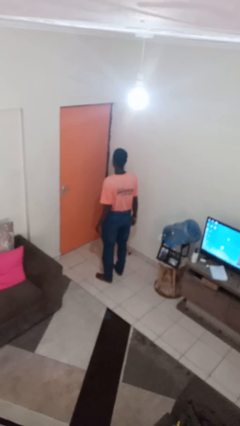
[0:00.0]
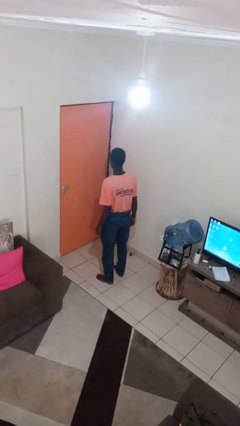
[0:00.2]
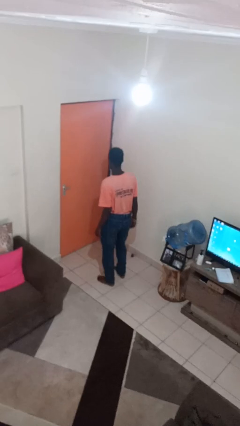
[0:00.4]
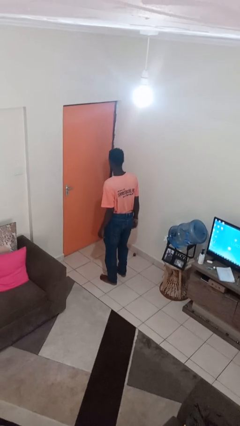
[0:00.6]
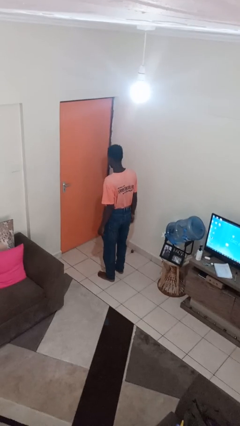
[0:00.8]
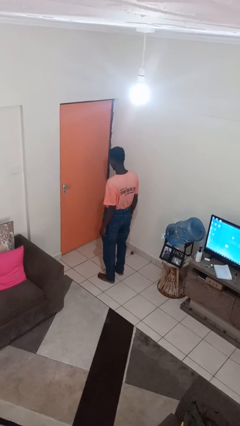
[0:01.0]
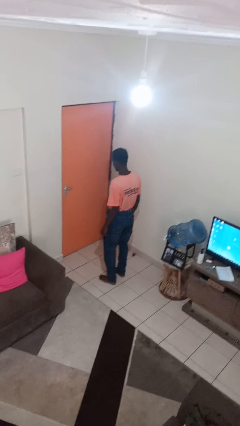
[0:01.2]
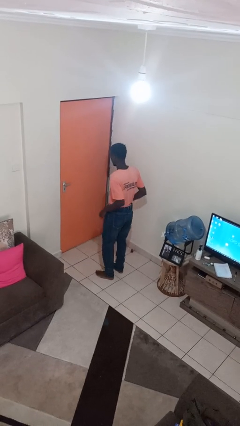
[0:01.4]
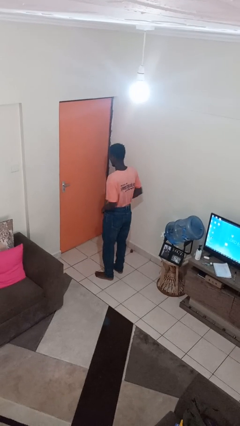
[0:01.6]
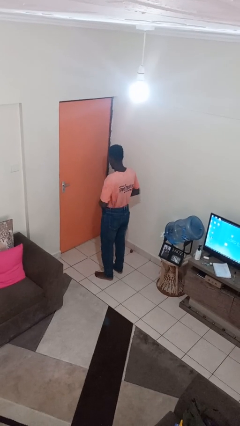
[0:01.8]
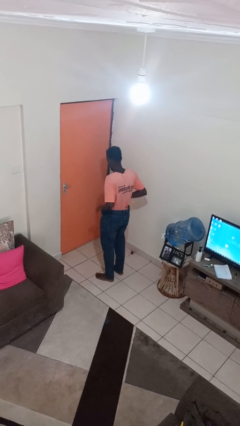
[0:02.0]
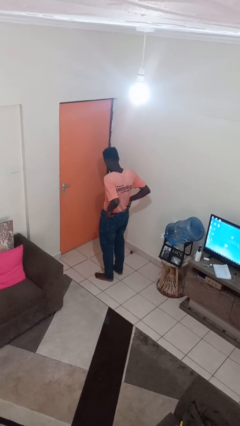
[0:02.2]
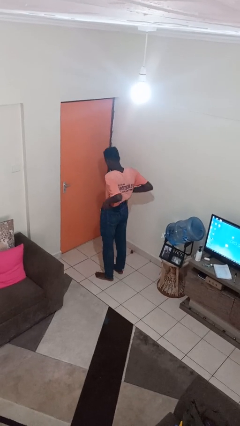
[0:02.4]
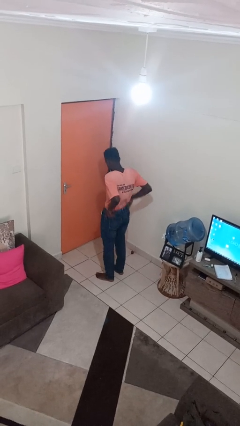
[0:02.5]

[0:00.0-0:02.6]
person hikes up pants

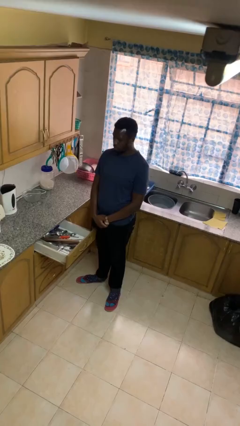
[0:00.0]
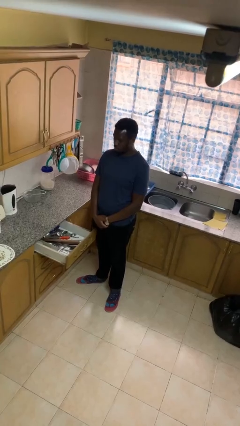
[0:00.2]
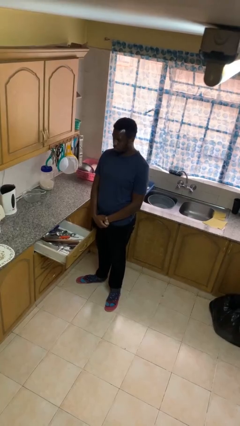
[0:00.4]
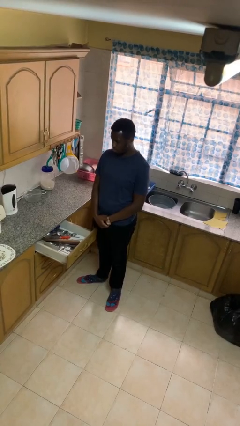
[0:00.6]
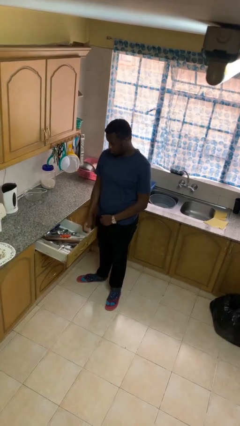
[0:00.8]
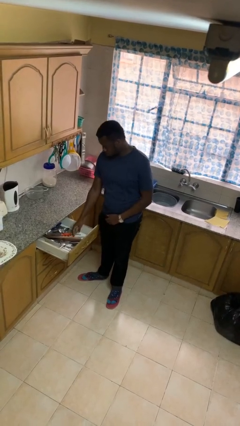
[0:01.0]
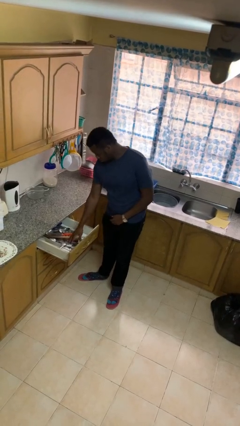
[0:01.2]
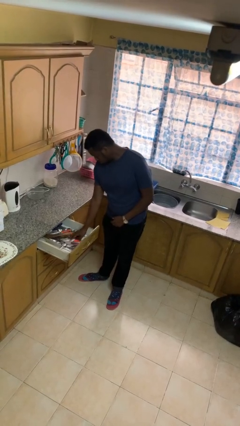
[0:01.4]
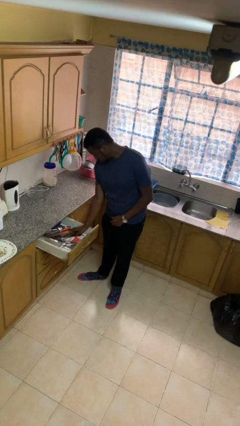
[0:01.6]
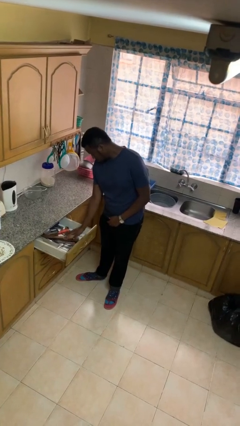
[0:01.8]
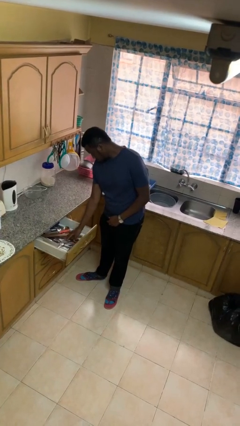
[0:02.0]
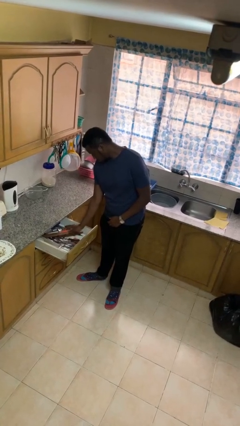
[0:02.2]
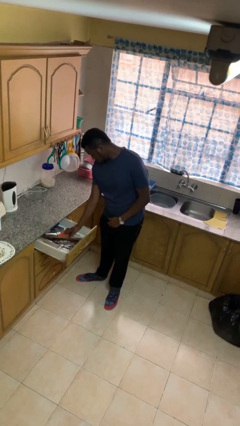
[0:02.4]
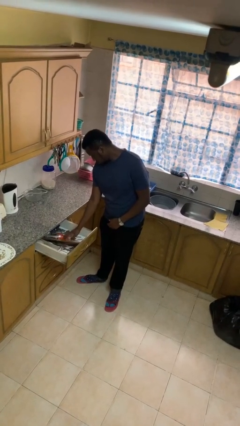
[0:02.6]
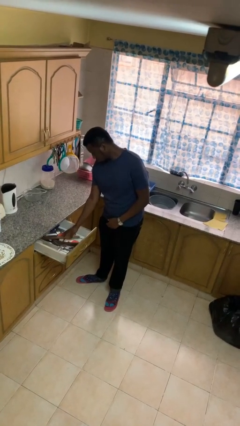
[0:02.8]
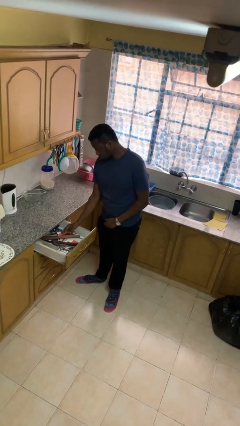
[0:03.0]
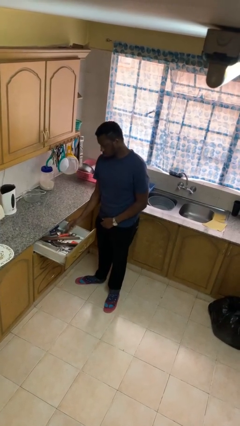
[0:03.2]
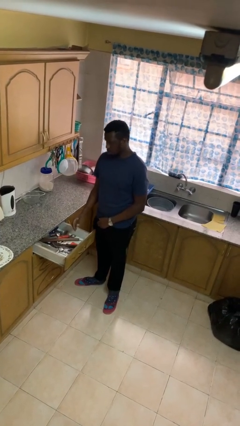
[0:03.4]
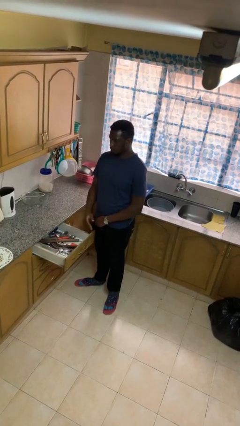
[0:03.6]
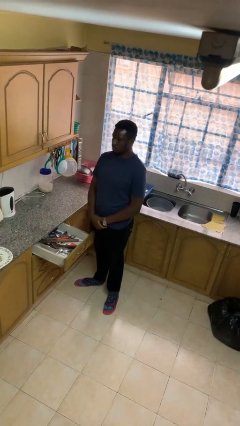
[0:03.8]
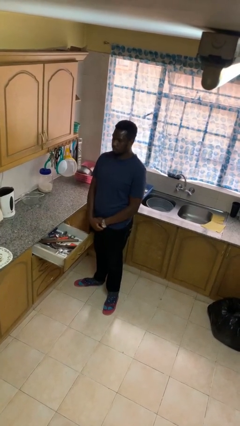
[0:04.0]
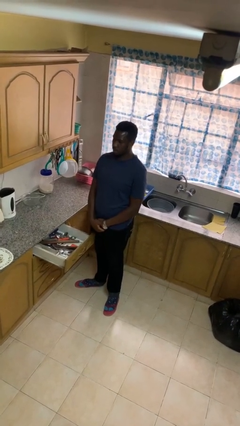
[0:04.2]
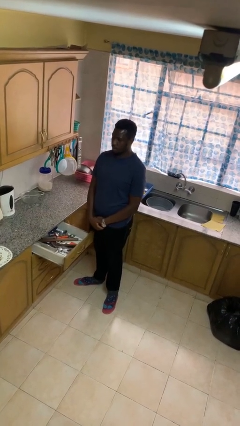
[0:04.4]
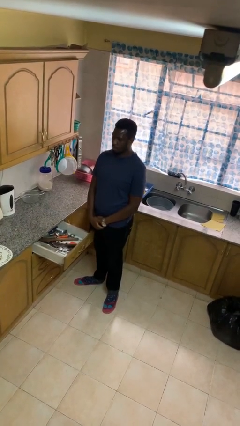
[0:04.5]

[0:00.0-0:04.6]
person searches in kitchen drawer

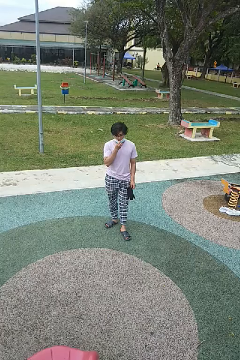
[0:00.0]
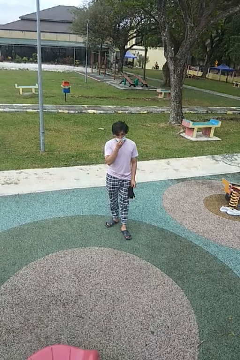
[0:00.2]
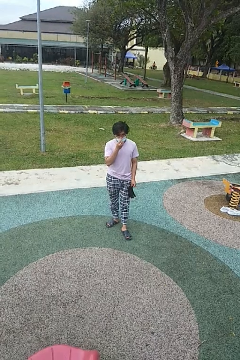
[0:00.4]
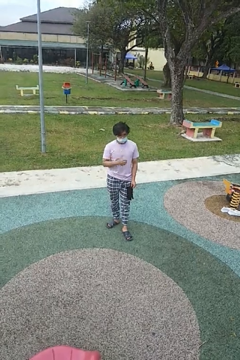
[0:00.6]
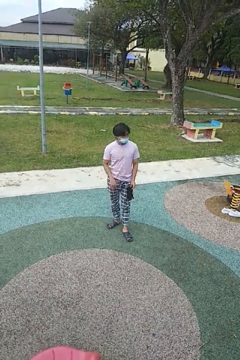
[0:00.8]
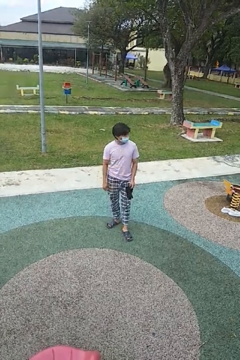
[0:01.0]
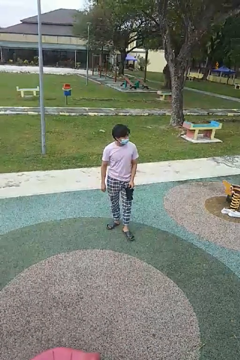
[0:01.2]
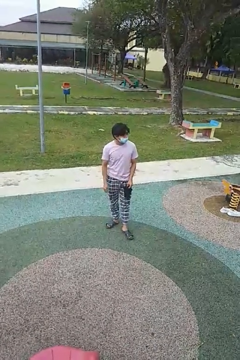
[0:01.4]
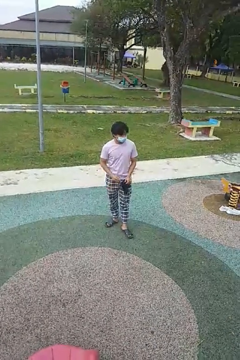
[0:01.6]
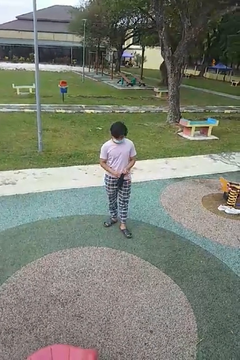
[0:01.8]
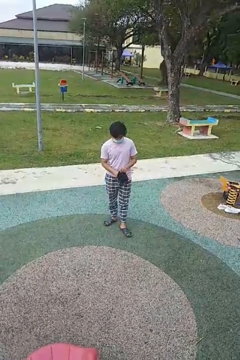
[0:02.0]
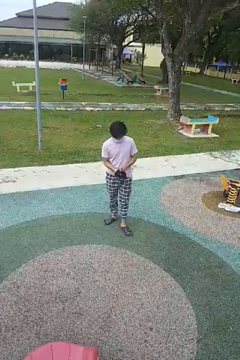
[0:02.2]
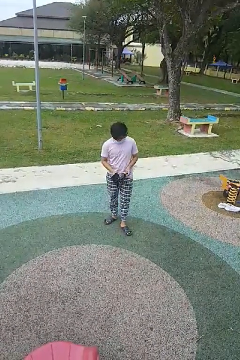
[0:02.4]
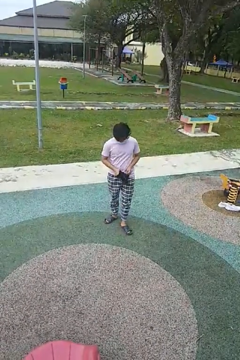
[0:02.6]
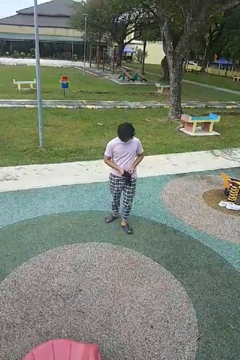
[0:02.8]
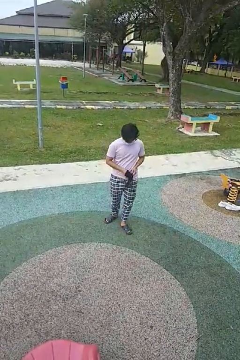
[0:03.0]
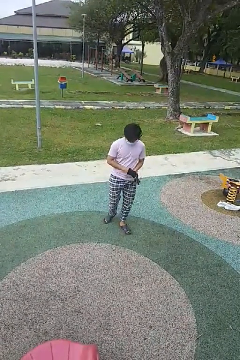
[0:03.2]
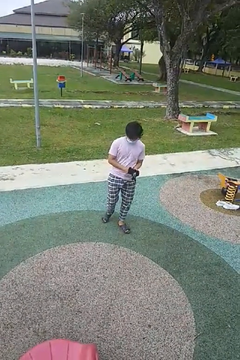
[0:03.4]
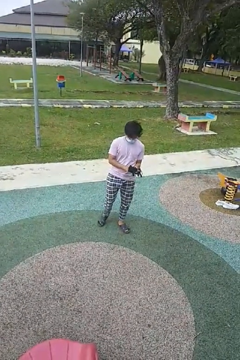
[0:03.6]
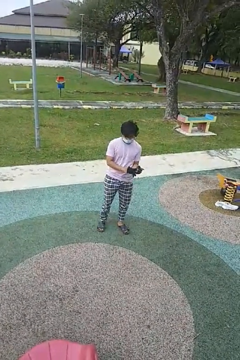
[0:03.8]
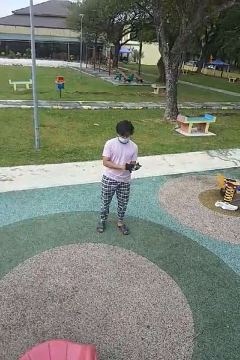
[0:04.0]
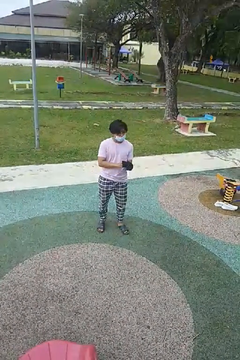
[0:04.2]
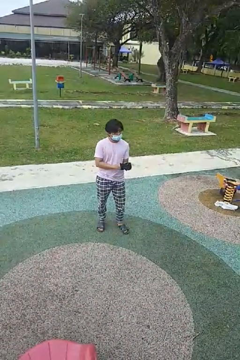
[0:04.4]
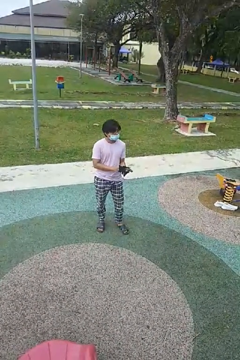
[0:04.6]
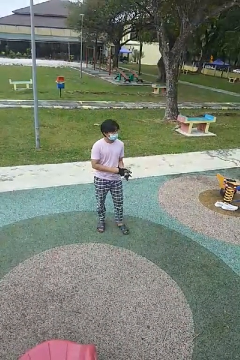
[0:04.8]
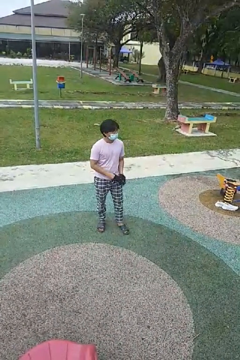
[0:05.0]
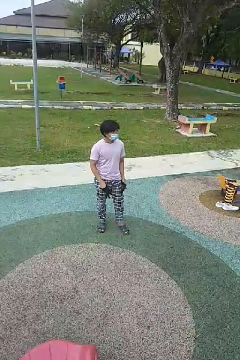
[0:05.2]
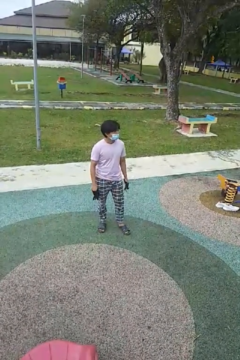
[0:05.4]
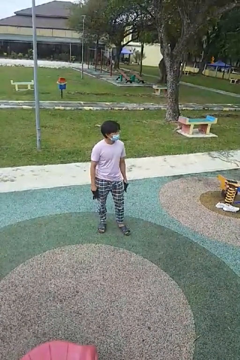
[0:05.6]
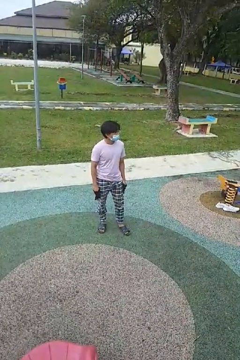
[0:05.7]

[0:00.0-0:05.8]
person puts on gloves

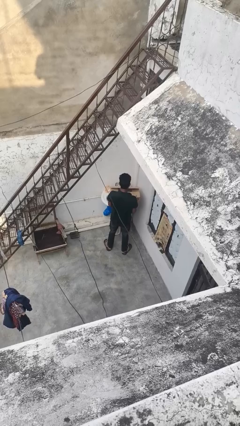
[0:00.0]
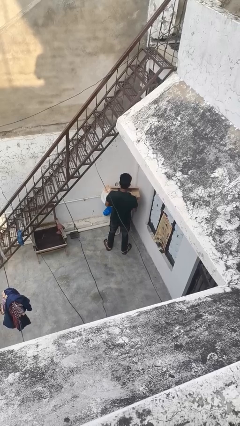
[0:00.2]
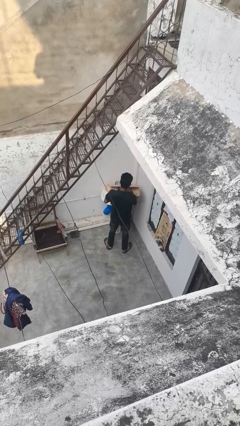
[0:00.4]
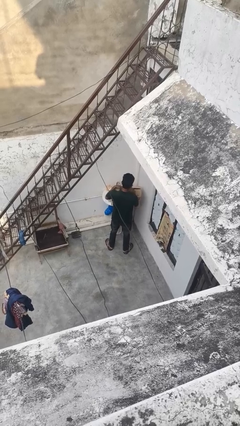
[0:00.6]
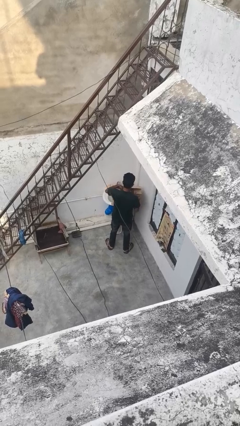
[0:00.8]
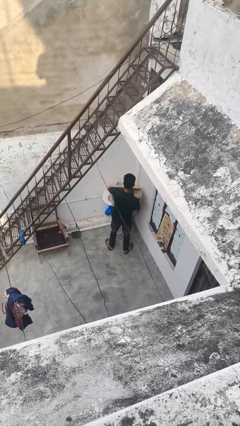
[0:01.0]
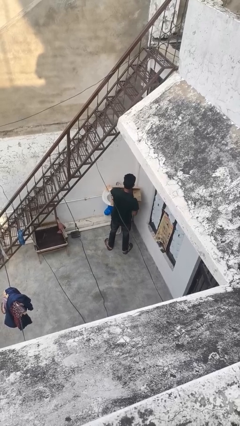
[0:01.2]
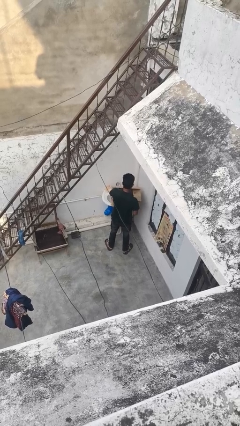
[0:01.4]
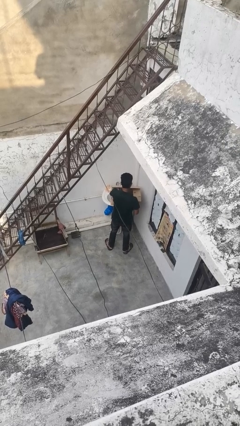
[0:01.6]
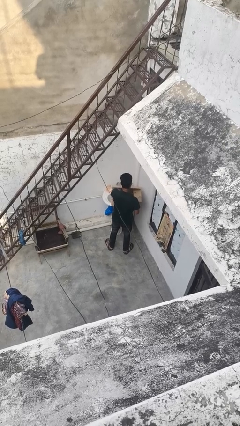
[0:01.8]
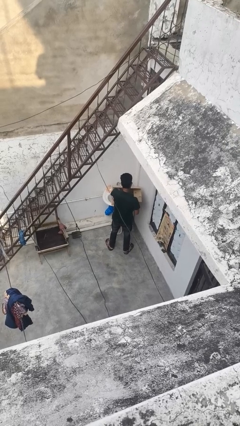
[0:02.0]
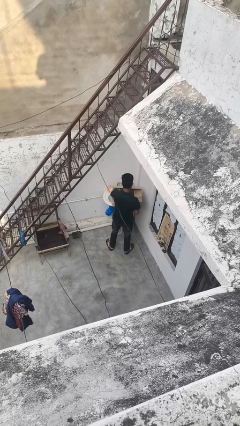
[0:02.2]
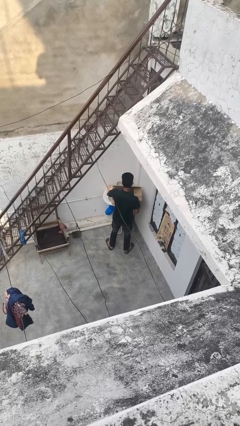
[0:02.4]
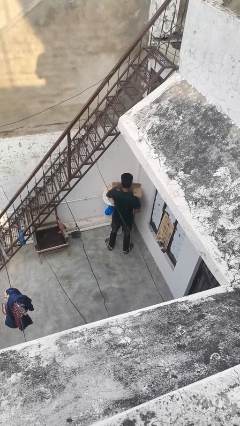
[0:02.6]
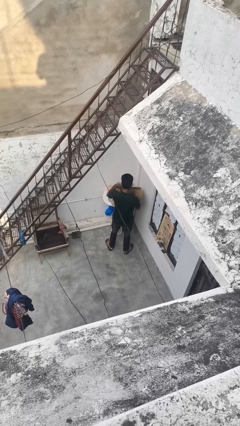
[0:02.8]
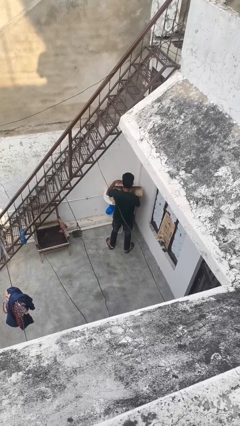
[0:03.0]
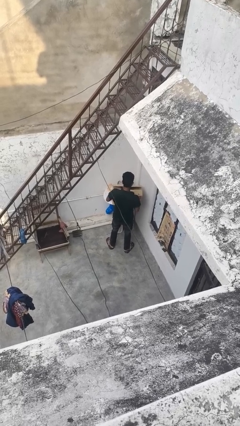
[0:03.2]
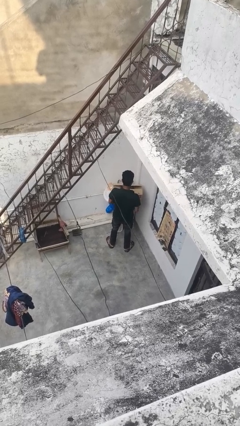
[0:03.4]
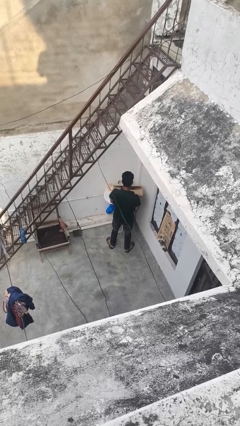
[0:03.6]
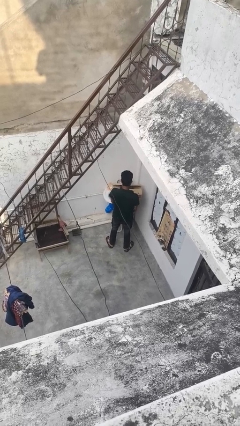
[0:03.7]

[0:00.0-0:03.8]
person searches in box

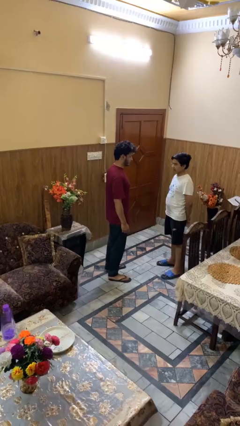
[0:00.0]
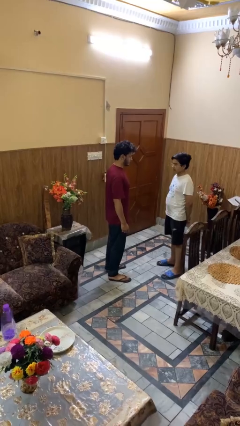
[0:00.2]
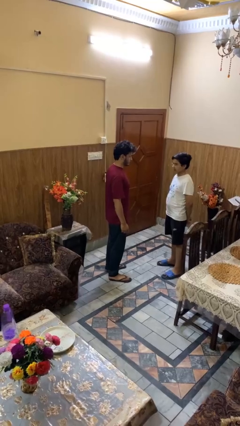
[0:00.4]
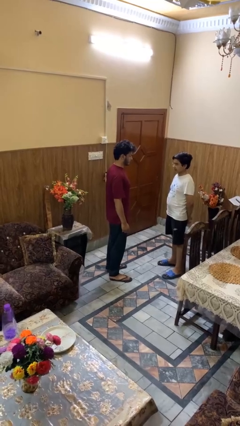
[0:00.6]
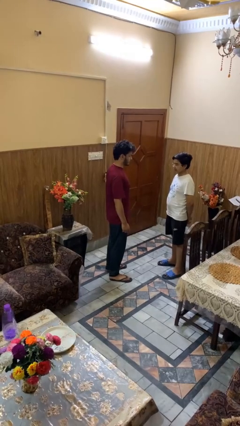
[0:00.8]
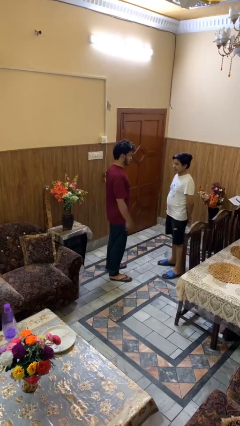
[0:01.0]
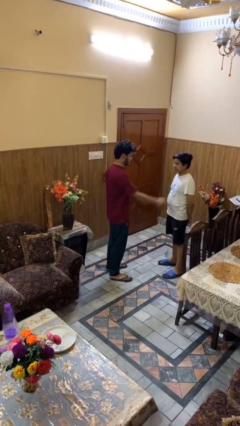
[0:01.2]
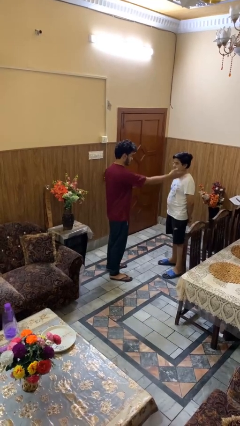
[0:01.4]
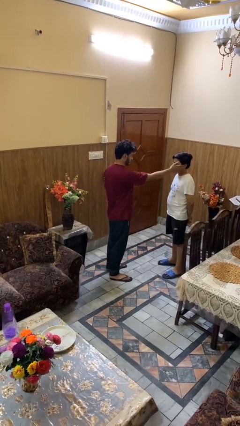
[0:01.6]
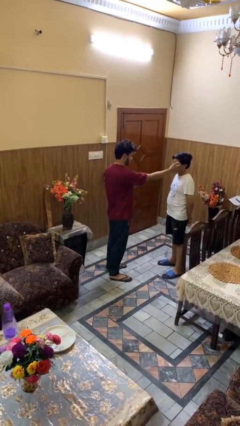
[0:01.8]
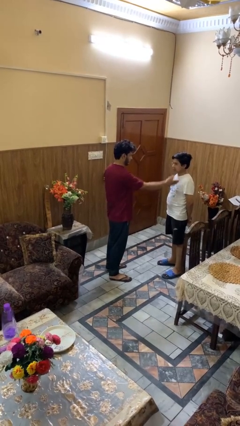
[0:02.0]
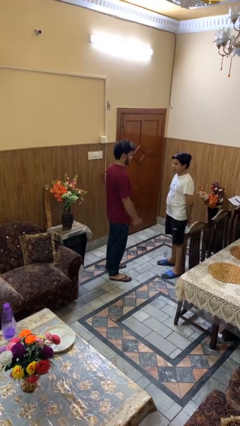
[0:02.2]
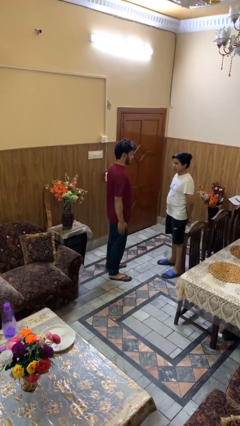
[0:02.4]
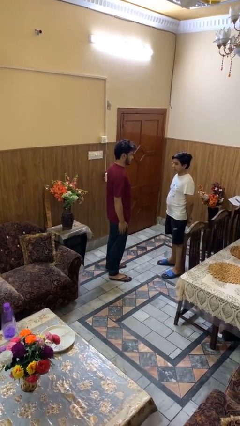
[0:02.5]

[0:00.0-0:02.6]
person touches face of person
